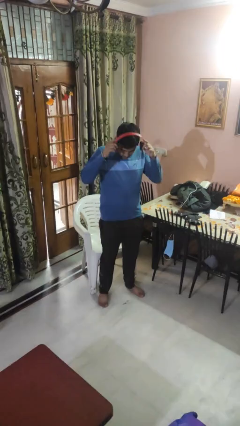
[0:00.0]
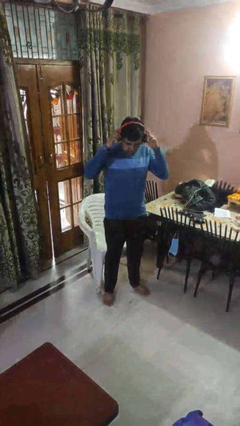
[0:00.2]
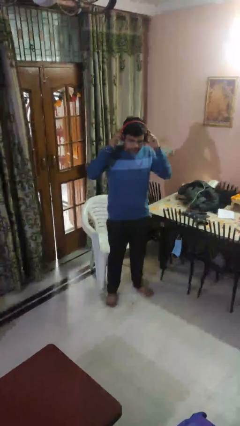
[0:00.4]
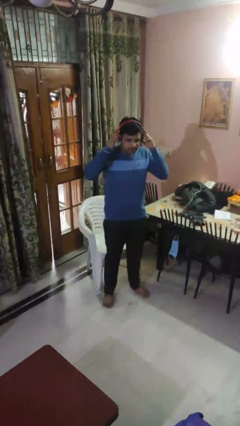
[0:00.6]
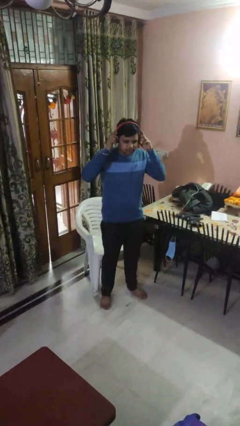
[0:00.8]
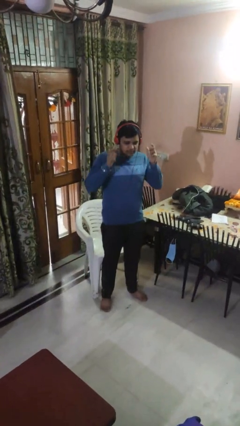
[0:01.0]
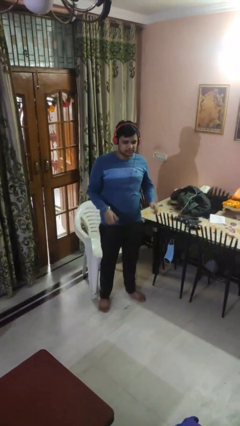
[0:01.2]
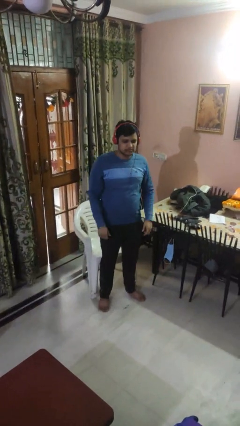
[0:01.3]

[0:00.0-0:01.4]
person puts on headphones

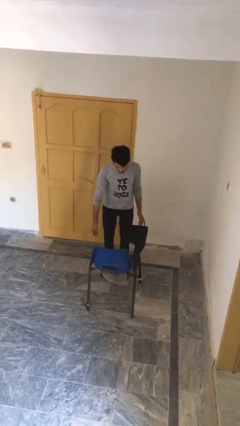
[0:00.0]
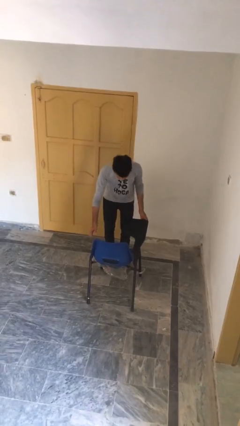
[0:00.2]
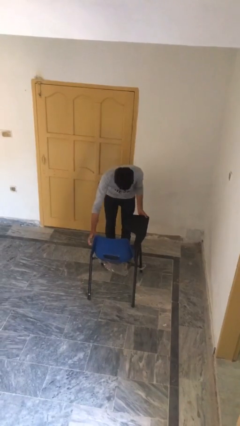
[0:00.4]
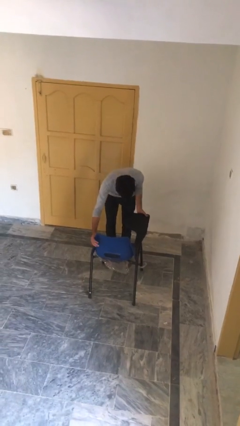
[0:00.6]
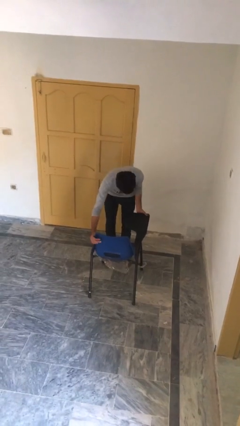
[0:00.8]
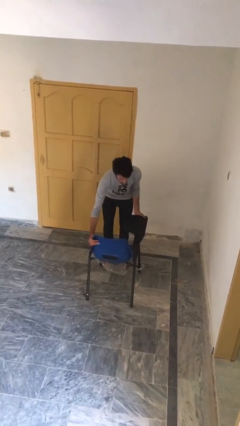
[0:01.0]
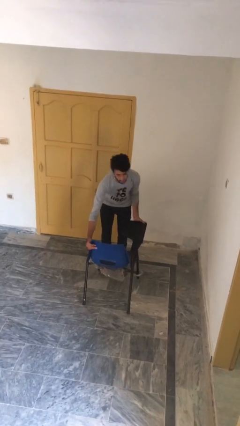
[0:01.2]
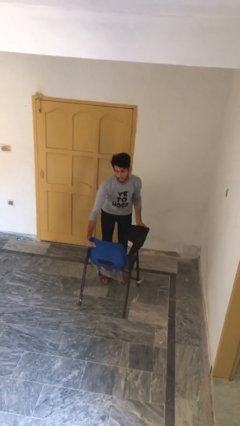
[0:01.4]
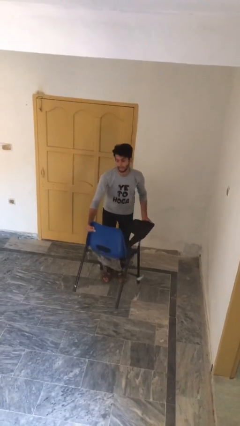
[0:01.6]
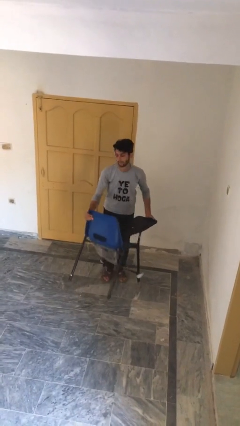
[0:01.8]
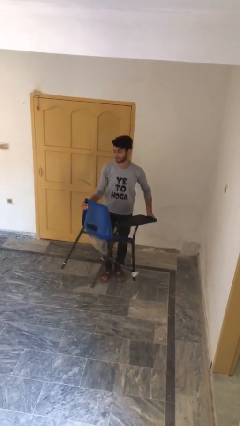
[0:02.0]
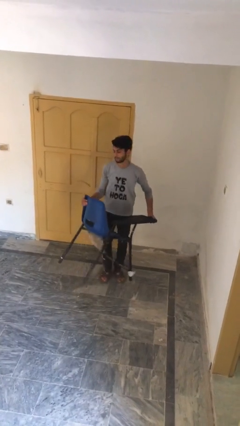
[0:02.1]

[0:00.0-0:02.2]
person picks up object from floor

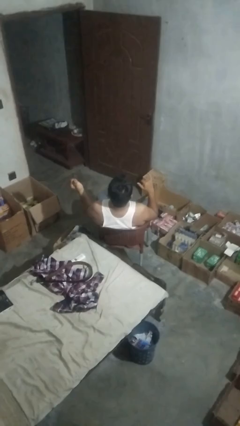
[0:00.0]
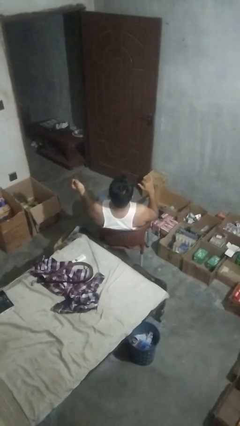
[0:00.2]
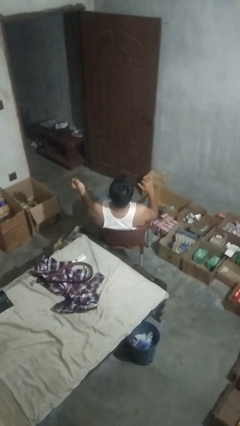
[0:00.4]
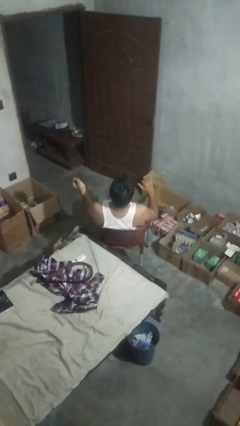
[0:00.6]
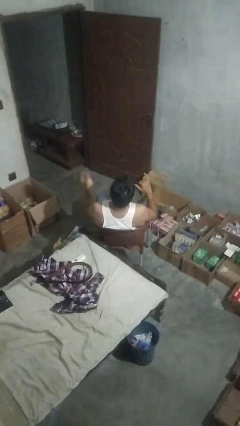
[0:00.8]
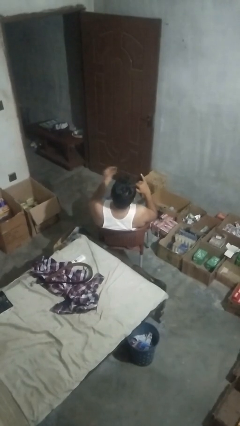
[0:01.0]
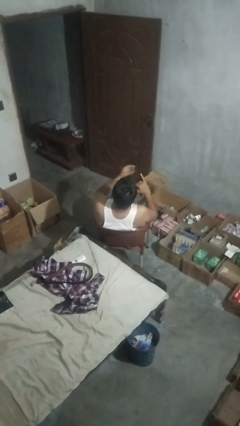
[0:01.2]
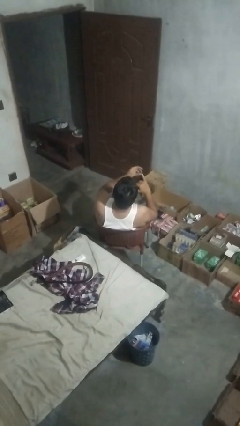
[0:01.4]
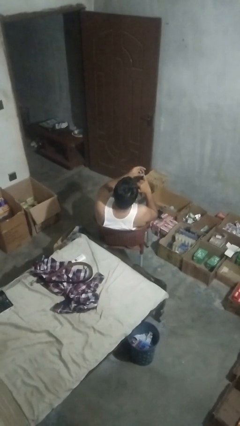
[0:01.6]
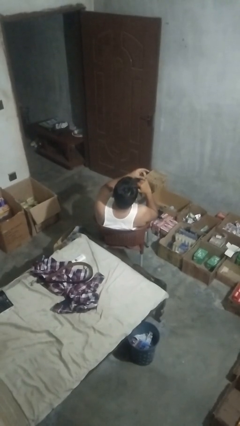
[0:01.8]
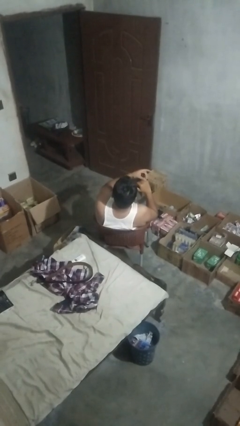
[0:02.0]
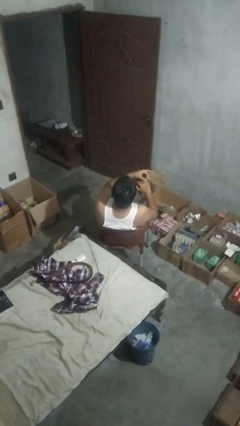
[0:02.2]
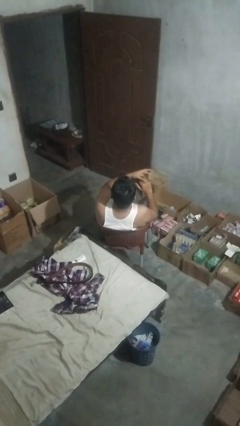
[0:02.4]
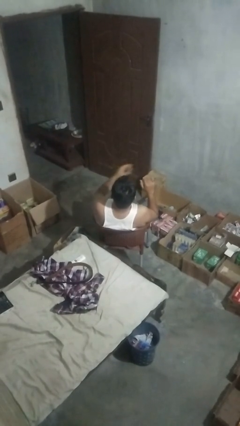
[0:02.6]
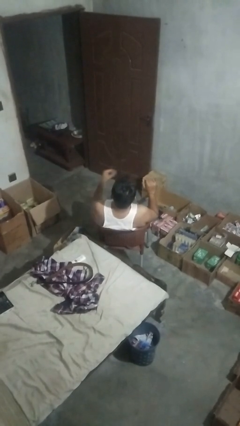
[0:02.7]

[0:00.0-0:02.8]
person puts on ring

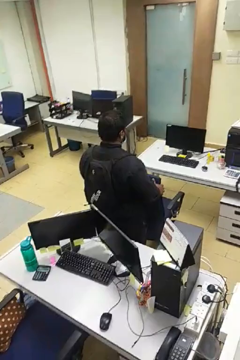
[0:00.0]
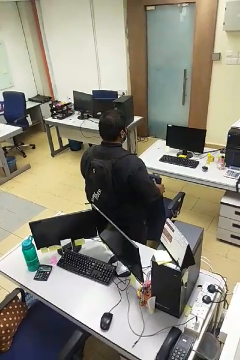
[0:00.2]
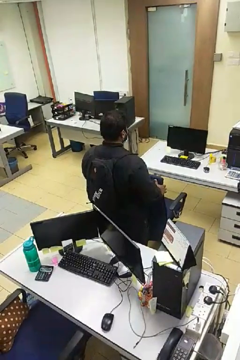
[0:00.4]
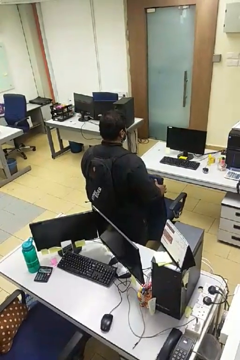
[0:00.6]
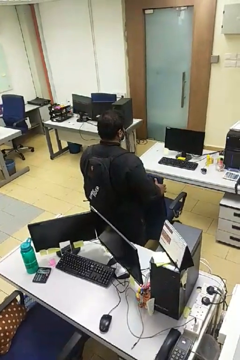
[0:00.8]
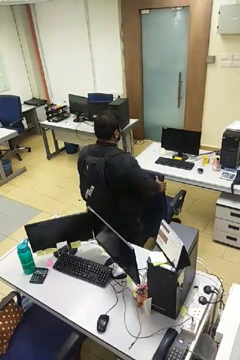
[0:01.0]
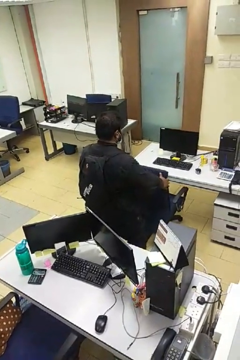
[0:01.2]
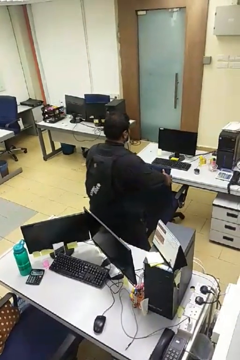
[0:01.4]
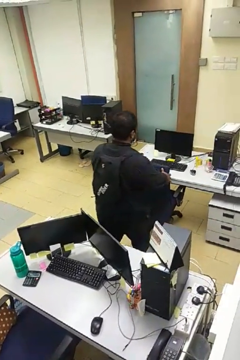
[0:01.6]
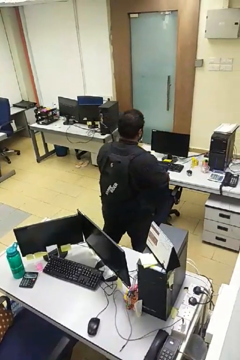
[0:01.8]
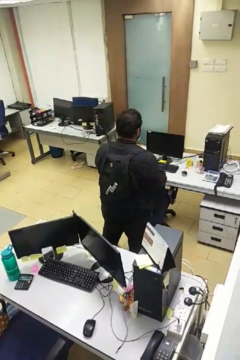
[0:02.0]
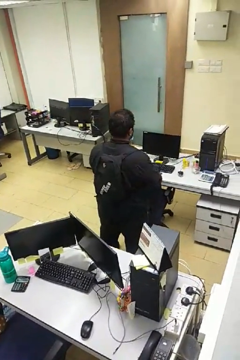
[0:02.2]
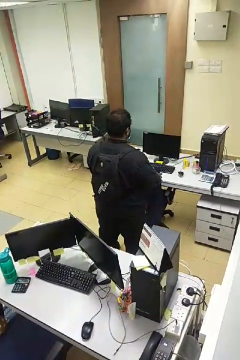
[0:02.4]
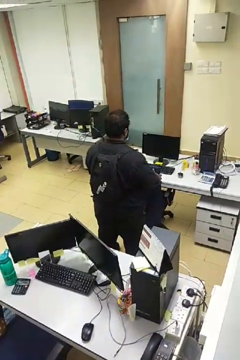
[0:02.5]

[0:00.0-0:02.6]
person pushes in chair

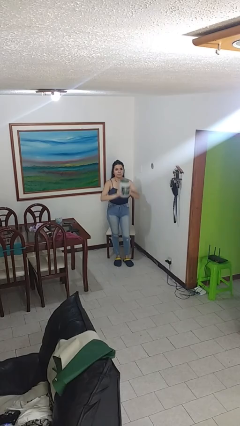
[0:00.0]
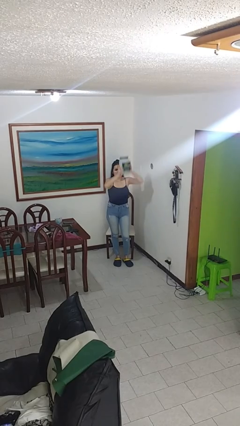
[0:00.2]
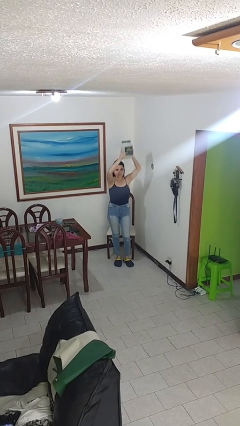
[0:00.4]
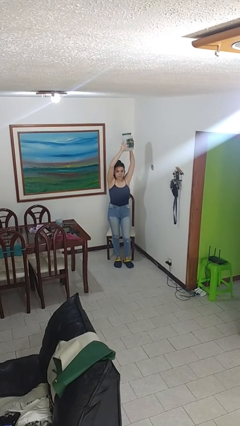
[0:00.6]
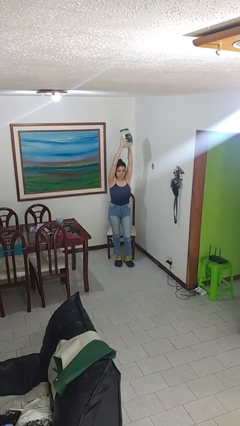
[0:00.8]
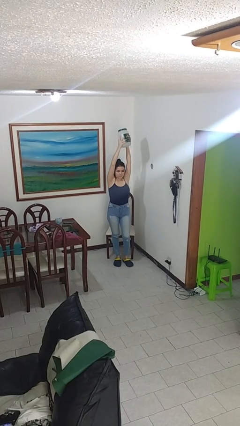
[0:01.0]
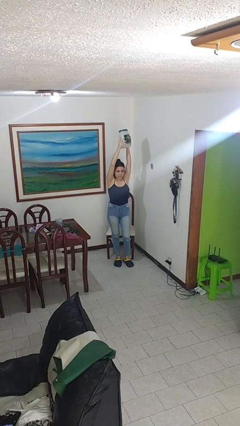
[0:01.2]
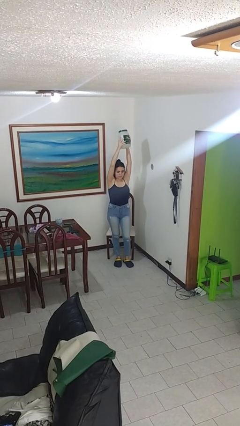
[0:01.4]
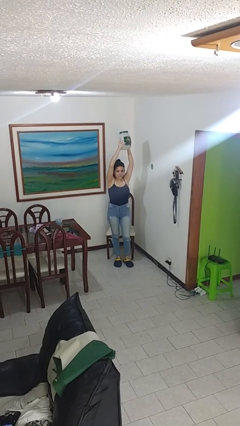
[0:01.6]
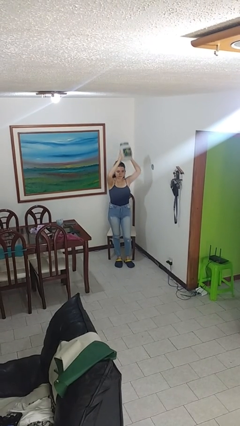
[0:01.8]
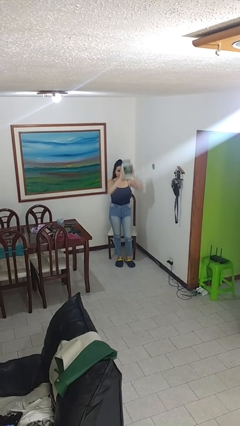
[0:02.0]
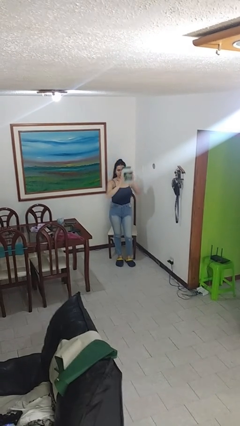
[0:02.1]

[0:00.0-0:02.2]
person holds object above head

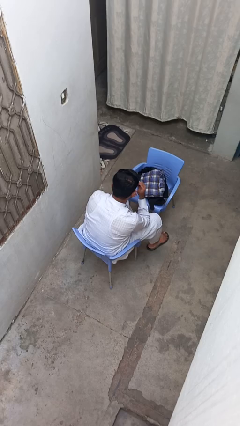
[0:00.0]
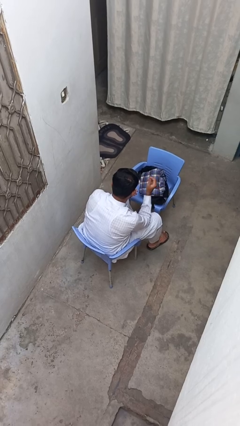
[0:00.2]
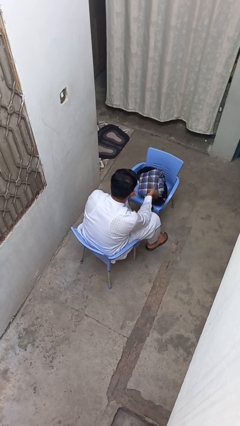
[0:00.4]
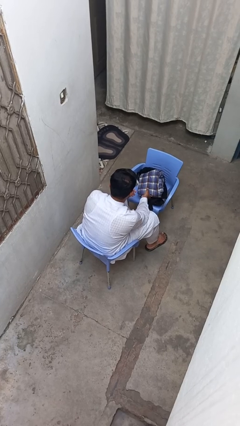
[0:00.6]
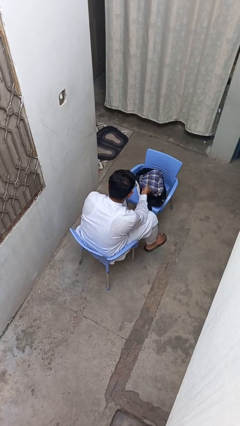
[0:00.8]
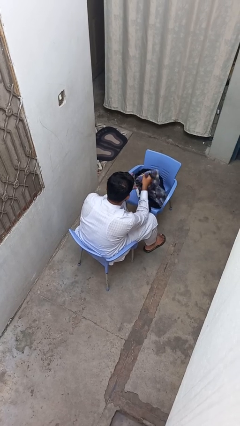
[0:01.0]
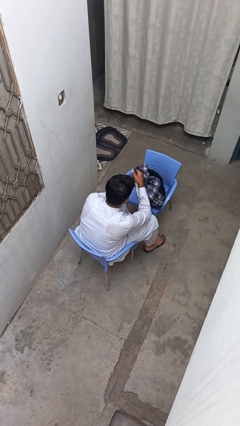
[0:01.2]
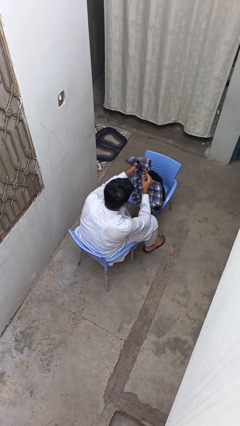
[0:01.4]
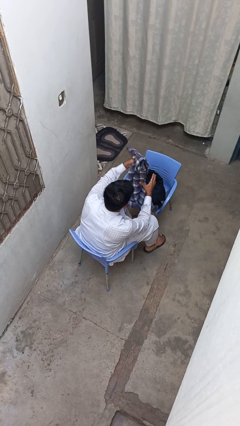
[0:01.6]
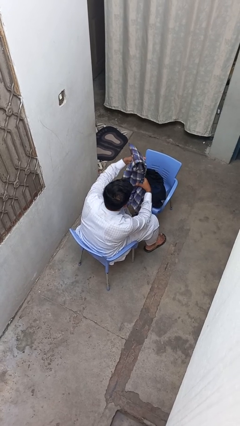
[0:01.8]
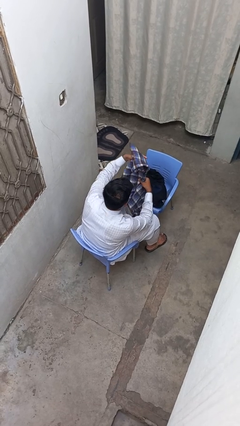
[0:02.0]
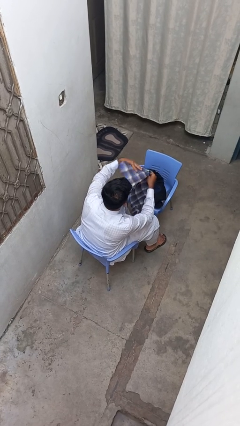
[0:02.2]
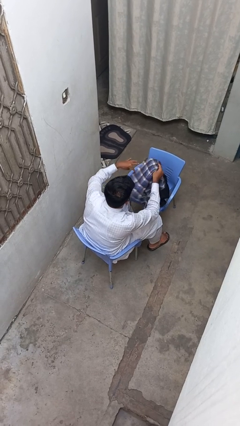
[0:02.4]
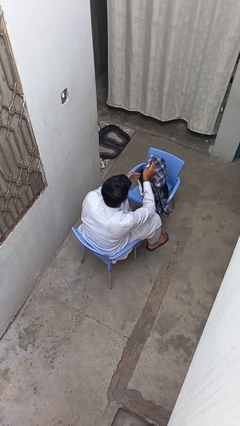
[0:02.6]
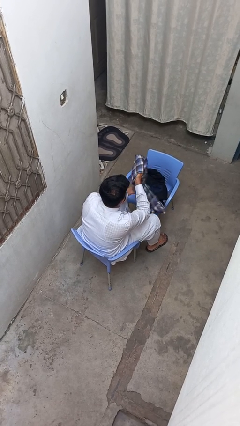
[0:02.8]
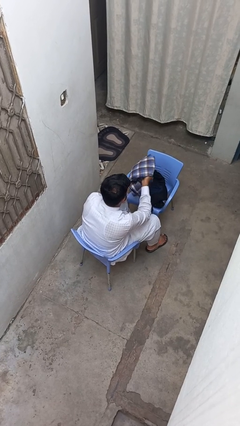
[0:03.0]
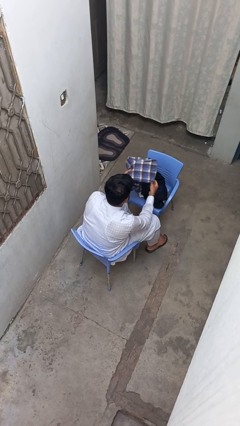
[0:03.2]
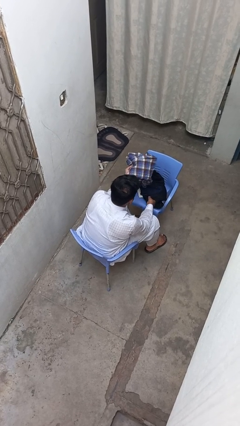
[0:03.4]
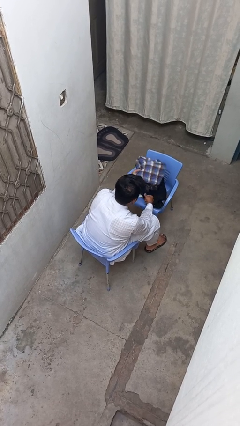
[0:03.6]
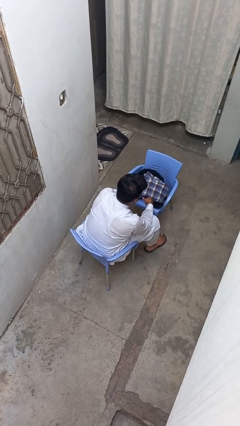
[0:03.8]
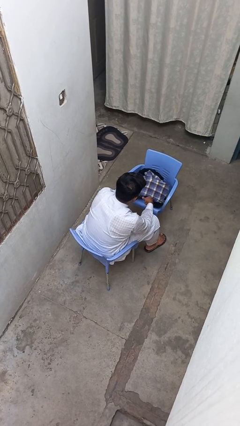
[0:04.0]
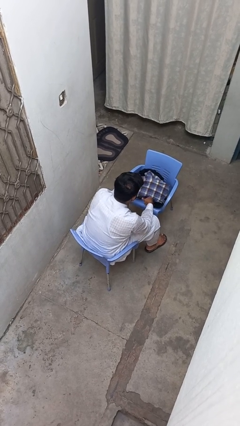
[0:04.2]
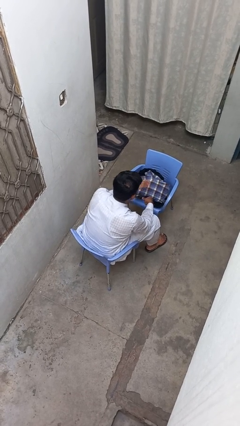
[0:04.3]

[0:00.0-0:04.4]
person folds shirt

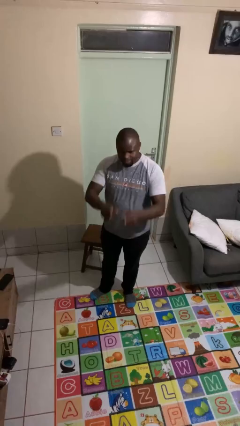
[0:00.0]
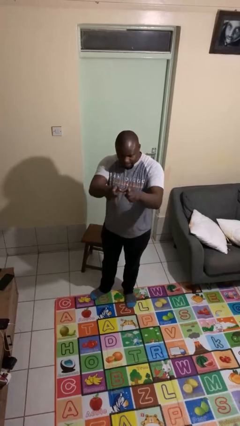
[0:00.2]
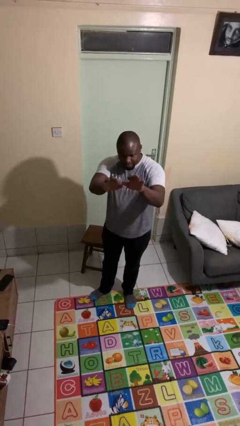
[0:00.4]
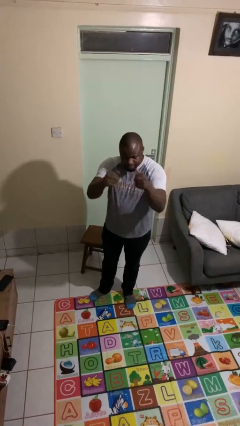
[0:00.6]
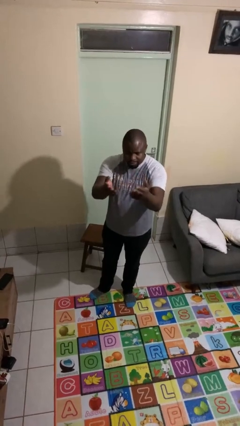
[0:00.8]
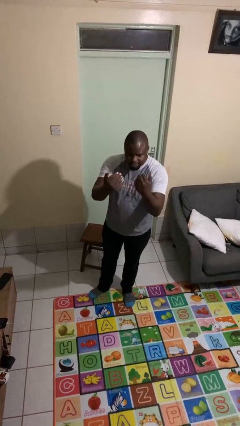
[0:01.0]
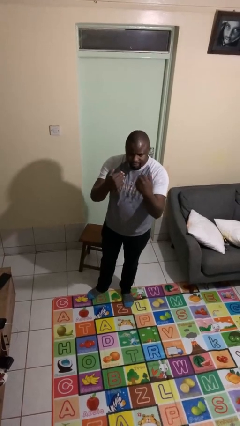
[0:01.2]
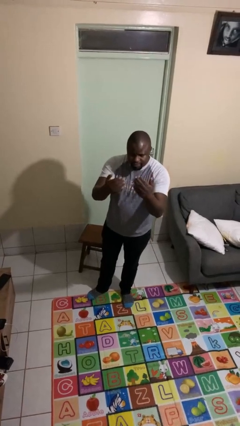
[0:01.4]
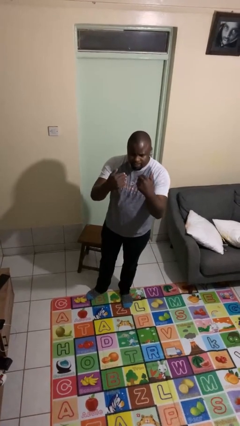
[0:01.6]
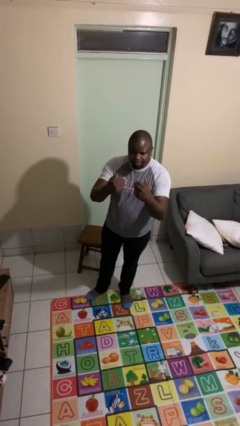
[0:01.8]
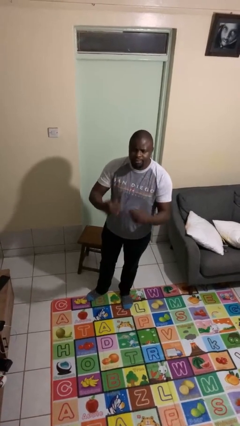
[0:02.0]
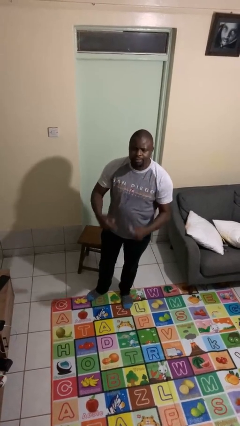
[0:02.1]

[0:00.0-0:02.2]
person gestures come here
